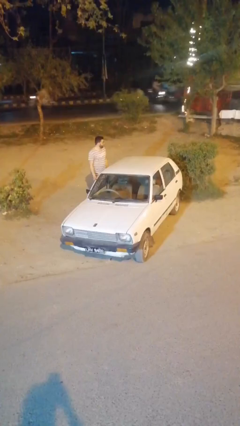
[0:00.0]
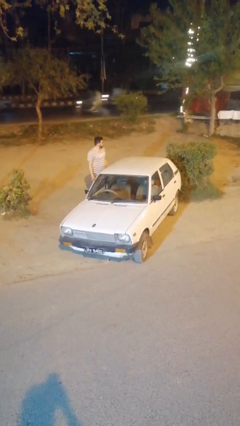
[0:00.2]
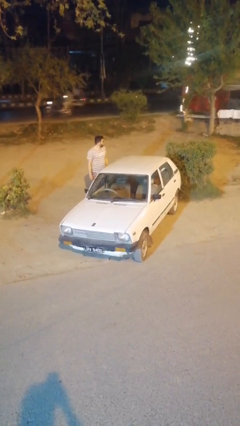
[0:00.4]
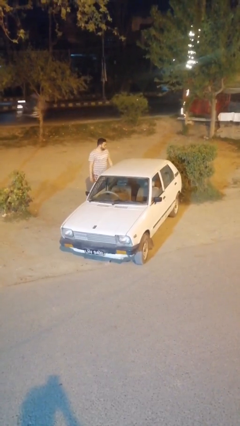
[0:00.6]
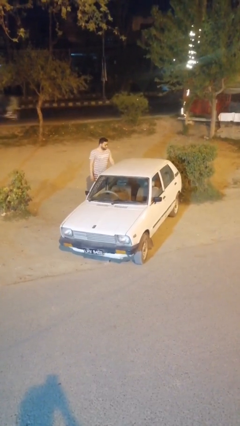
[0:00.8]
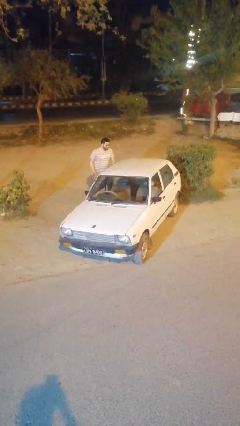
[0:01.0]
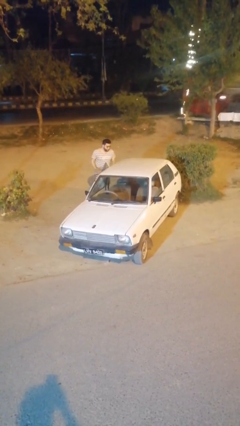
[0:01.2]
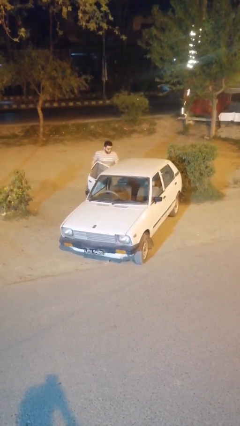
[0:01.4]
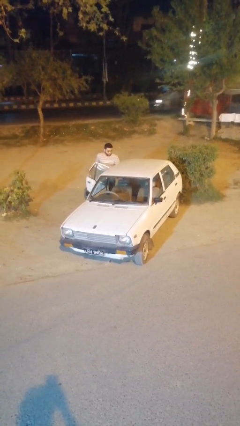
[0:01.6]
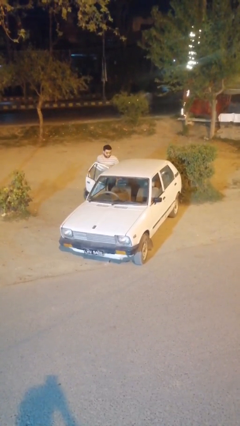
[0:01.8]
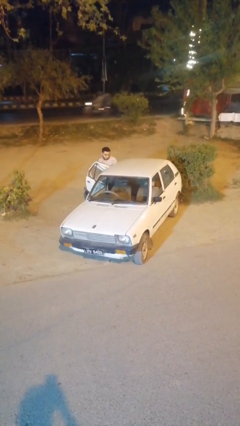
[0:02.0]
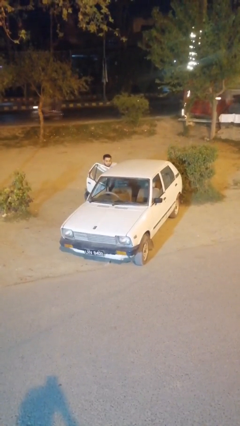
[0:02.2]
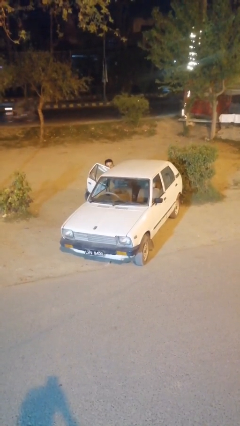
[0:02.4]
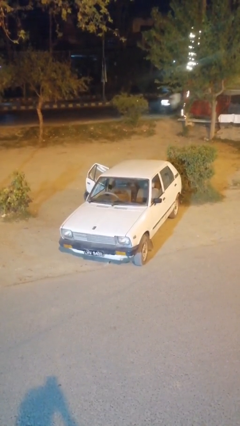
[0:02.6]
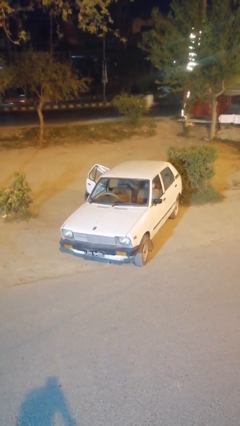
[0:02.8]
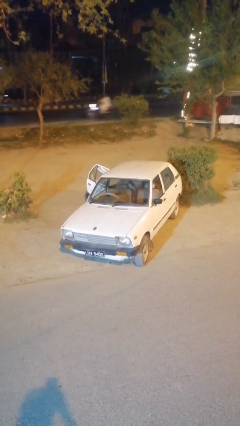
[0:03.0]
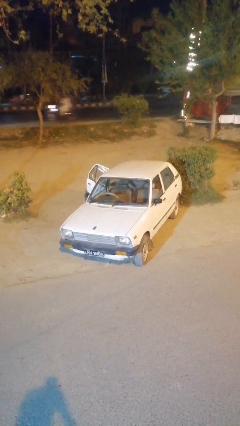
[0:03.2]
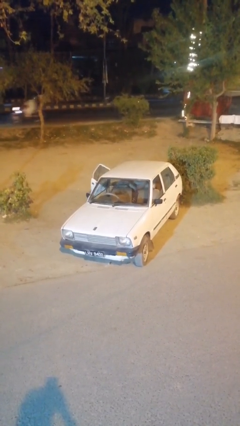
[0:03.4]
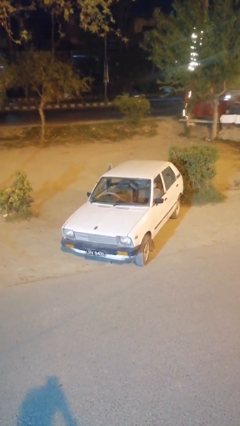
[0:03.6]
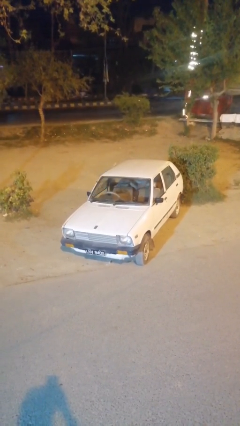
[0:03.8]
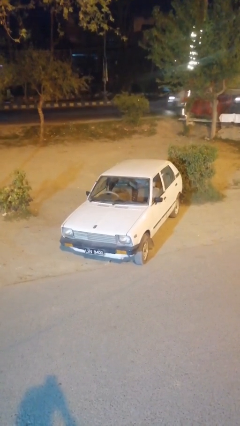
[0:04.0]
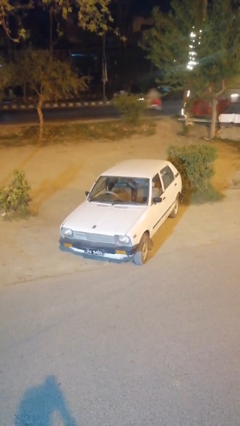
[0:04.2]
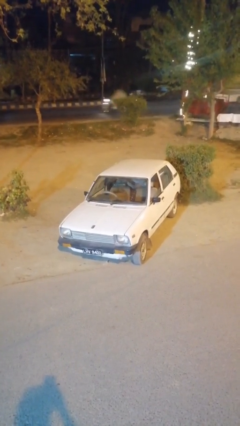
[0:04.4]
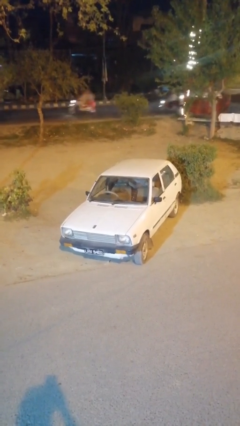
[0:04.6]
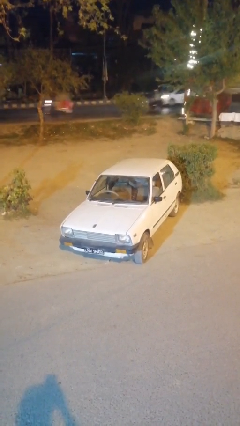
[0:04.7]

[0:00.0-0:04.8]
car picks up person

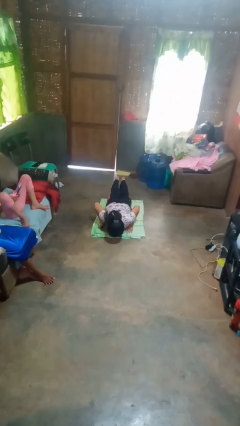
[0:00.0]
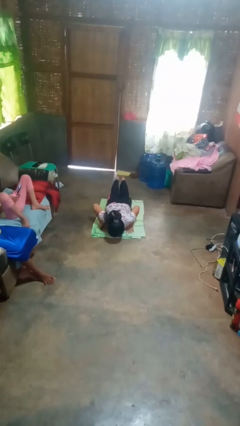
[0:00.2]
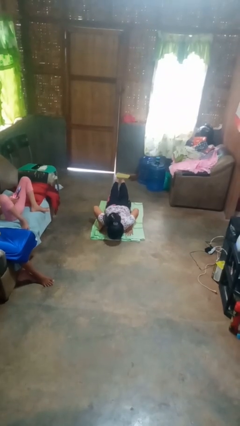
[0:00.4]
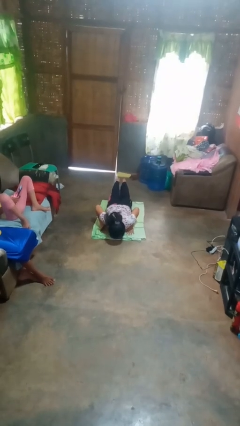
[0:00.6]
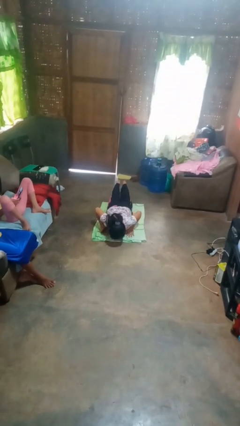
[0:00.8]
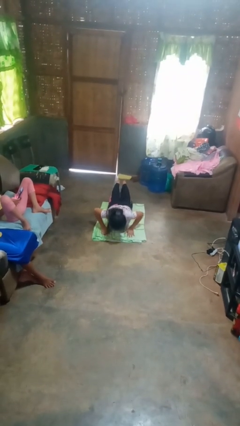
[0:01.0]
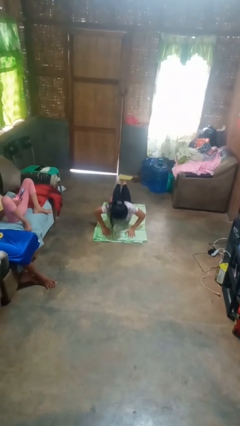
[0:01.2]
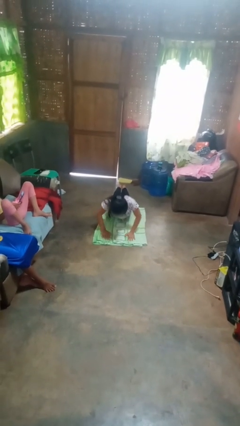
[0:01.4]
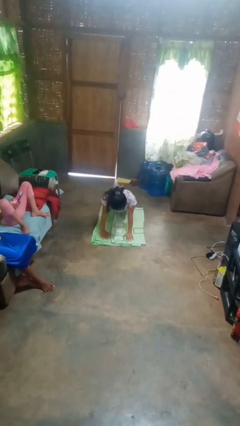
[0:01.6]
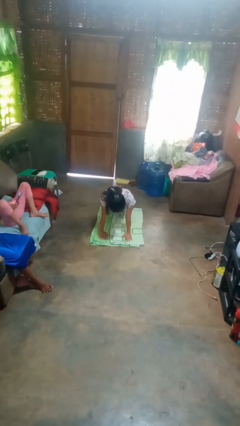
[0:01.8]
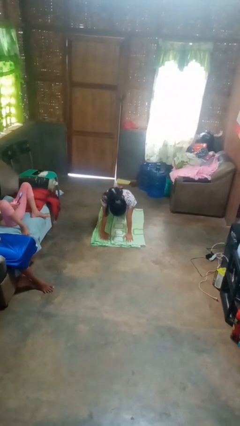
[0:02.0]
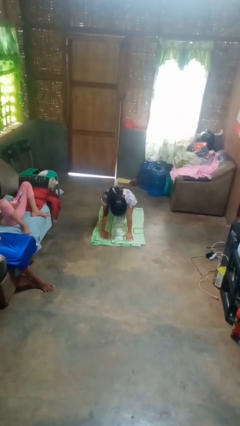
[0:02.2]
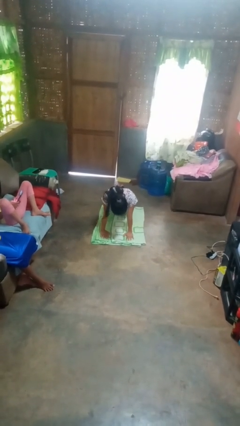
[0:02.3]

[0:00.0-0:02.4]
person exercises with pushup

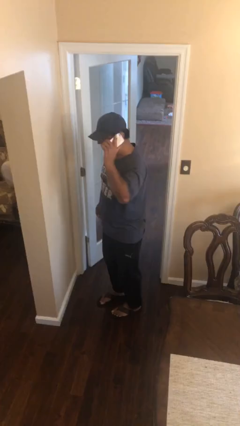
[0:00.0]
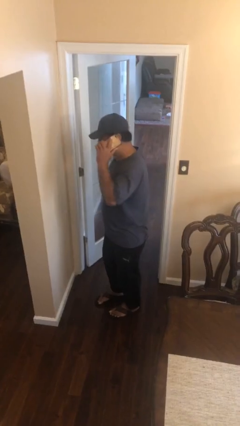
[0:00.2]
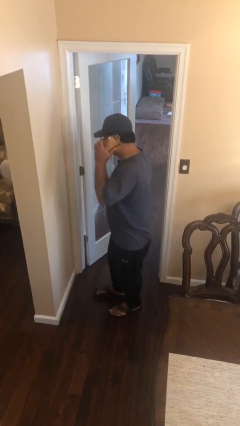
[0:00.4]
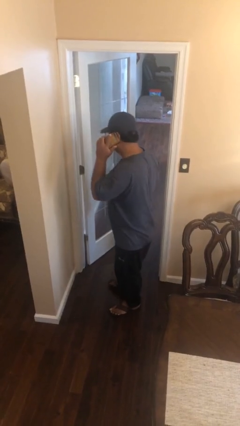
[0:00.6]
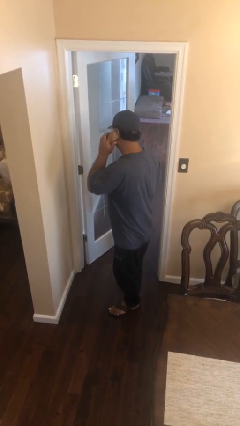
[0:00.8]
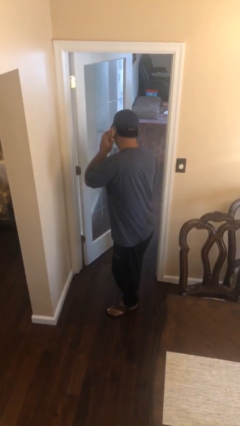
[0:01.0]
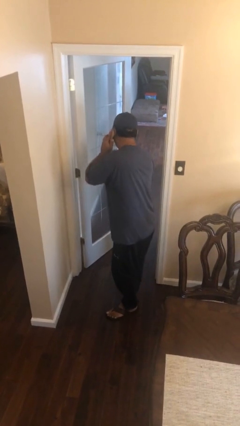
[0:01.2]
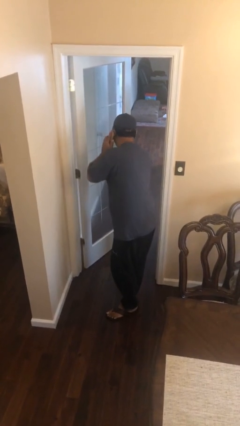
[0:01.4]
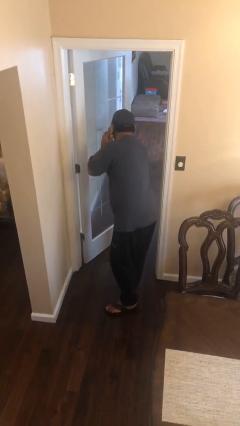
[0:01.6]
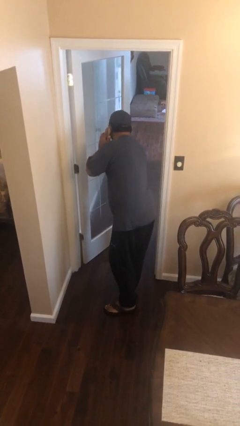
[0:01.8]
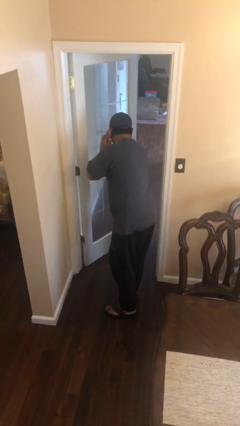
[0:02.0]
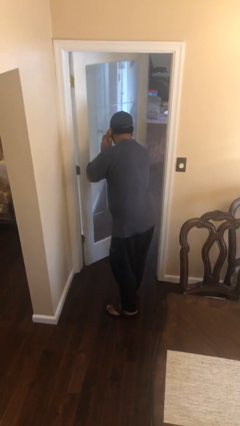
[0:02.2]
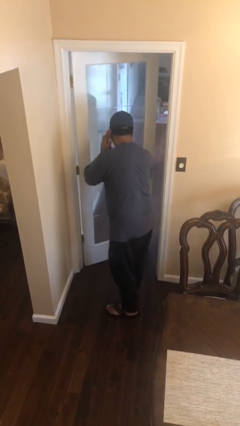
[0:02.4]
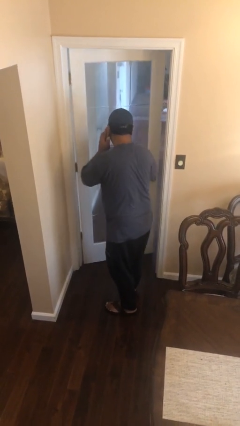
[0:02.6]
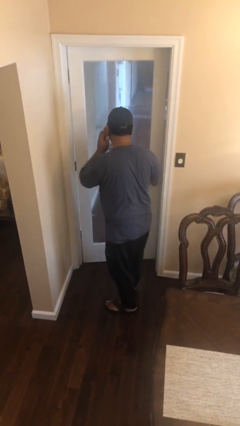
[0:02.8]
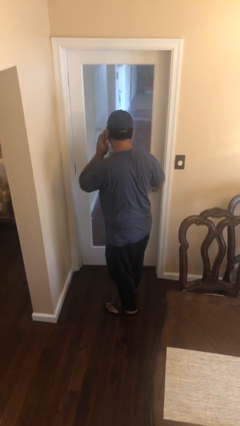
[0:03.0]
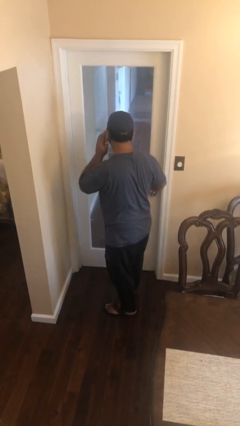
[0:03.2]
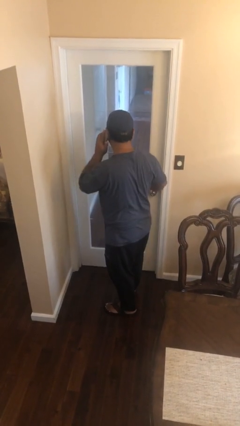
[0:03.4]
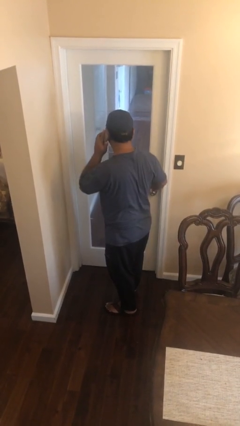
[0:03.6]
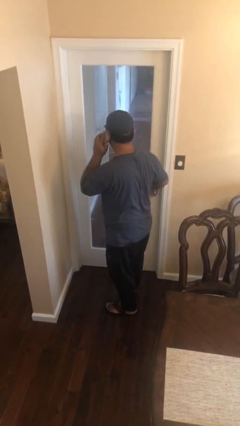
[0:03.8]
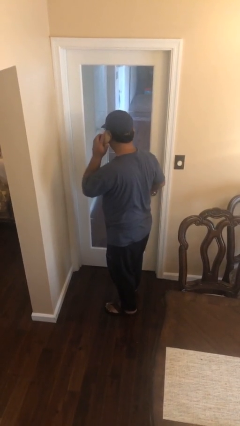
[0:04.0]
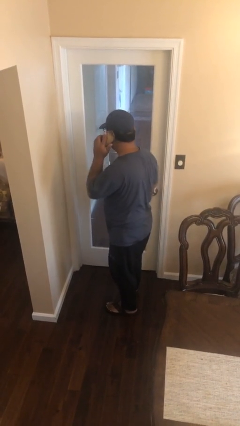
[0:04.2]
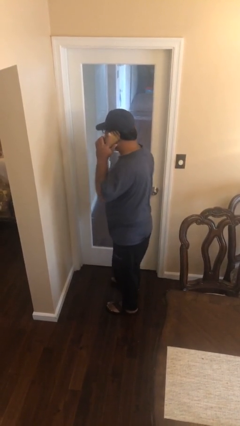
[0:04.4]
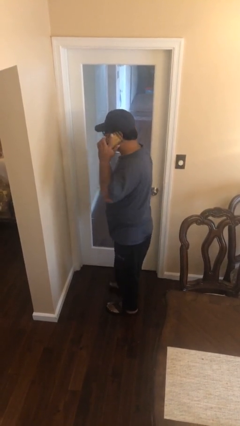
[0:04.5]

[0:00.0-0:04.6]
person closes facility door

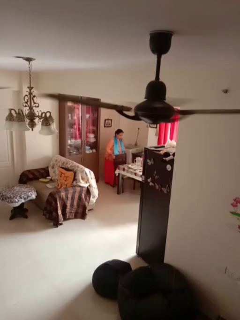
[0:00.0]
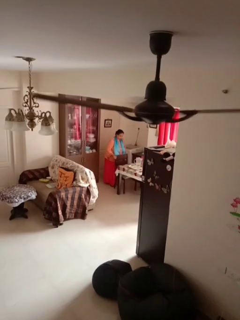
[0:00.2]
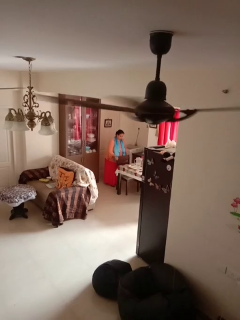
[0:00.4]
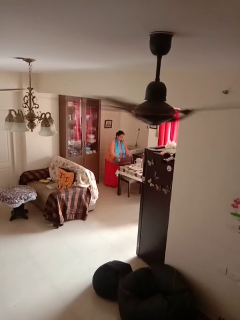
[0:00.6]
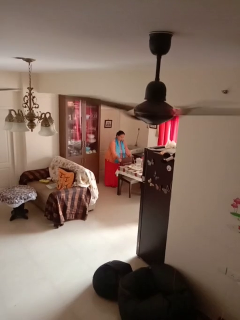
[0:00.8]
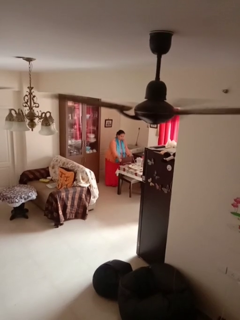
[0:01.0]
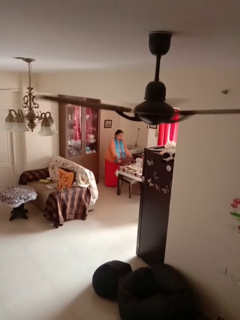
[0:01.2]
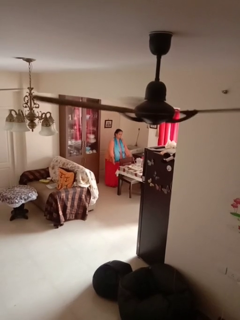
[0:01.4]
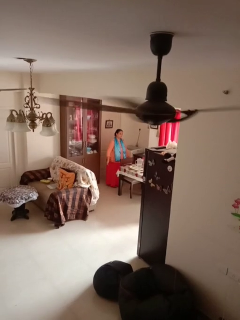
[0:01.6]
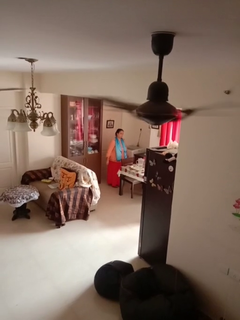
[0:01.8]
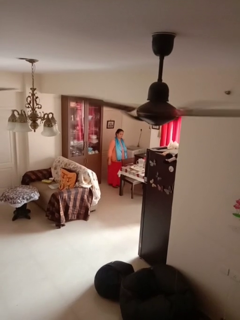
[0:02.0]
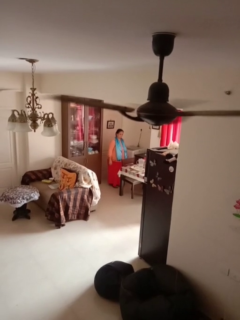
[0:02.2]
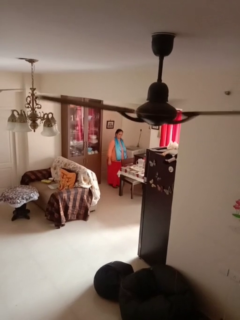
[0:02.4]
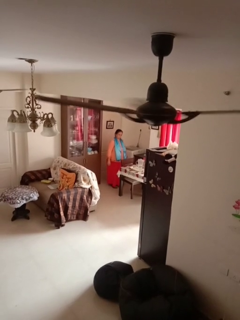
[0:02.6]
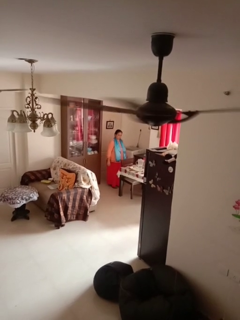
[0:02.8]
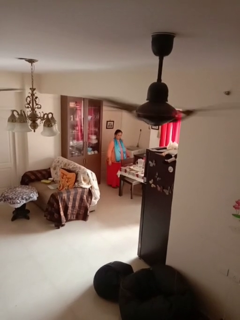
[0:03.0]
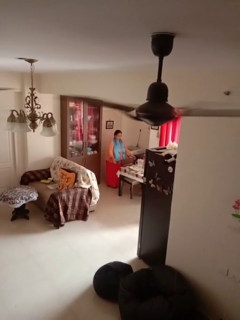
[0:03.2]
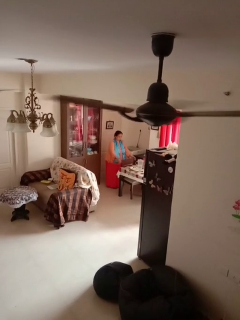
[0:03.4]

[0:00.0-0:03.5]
person pushes in chair

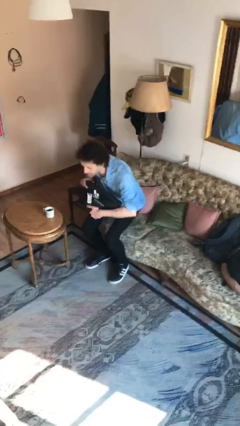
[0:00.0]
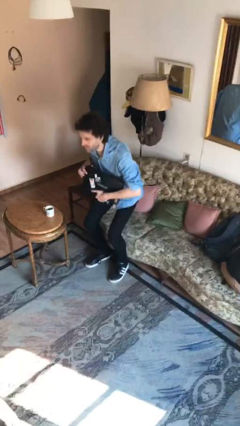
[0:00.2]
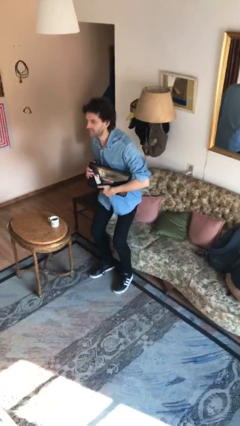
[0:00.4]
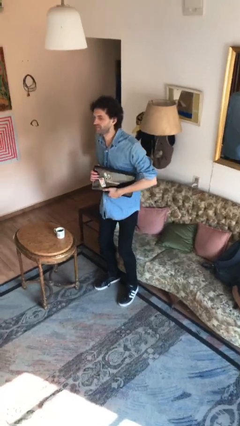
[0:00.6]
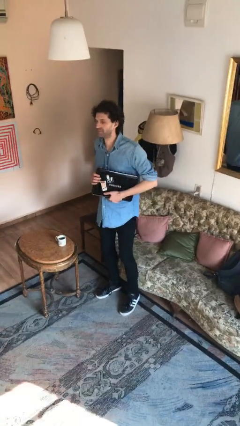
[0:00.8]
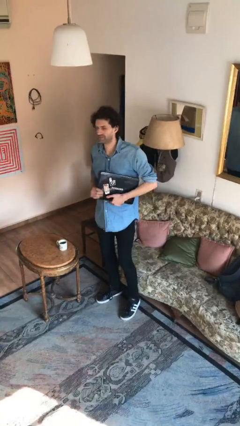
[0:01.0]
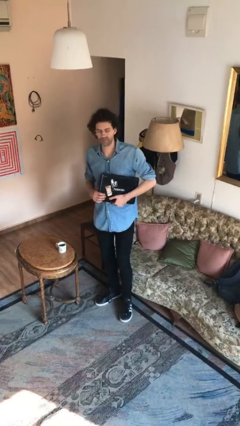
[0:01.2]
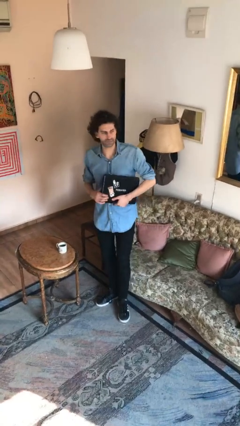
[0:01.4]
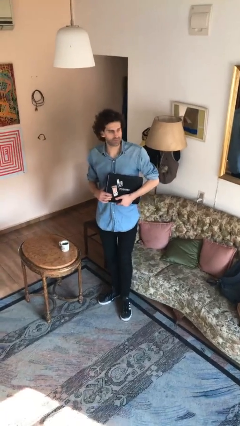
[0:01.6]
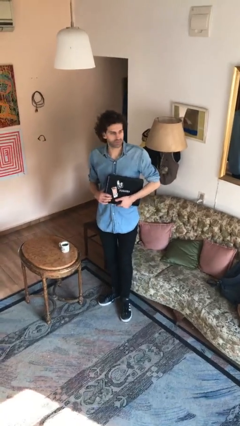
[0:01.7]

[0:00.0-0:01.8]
person stands up

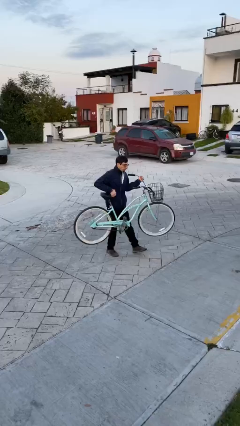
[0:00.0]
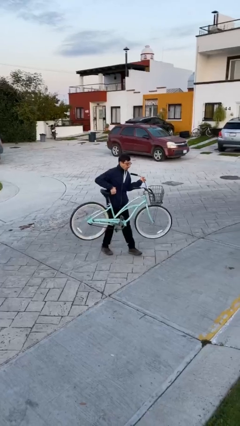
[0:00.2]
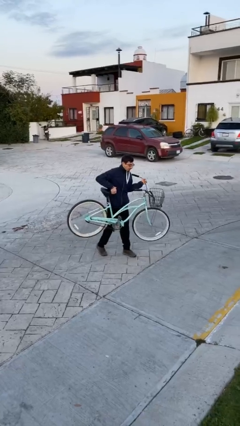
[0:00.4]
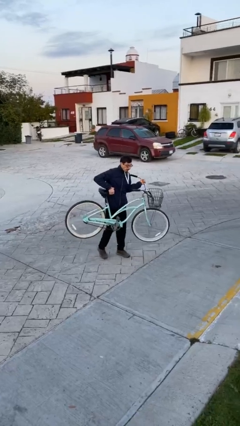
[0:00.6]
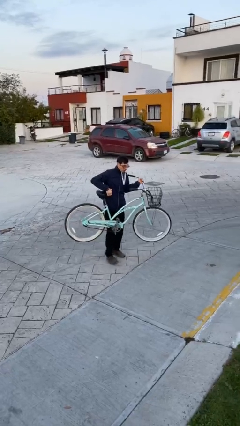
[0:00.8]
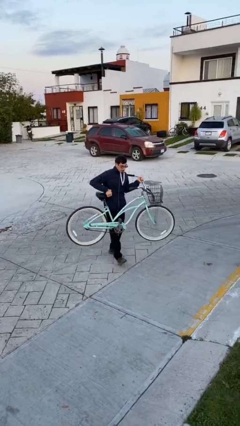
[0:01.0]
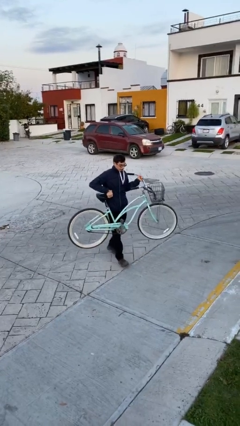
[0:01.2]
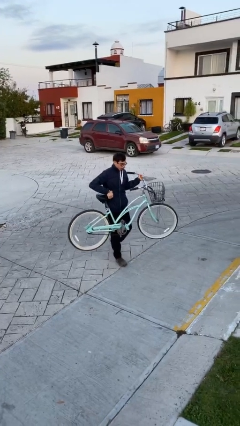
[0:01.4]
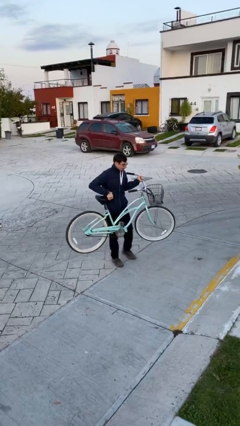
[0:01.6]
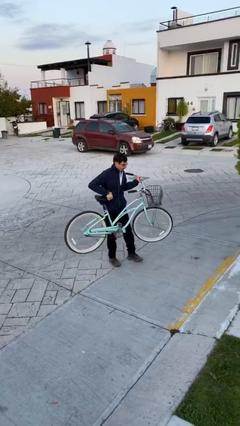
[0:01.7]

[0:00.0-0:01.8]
person carries heavy object
